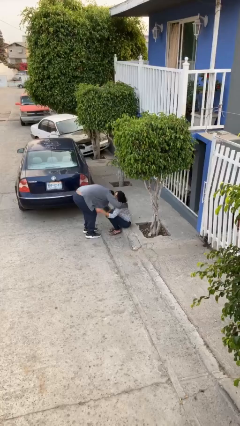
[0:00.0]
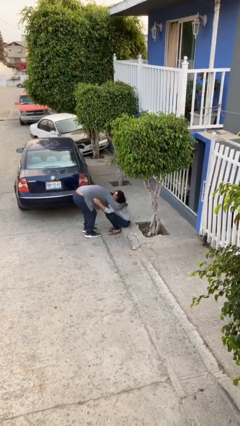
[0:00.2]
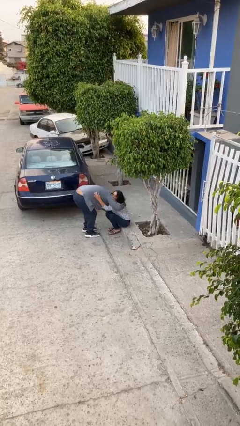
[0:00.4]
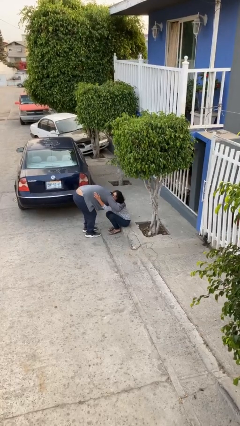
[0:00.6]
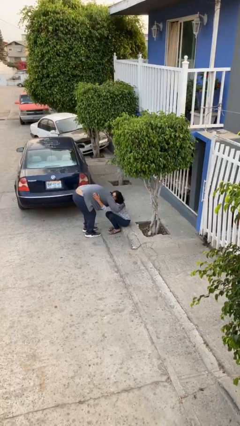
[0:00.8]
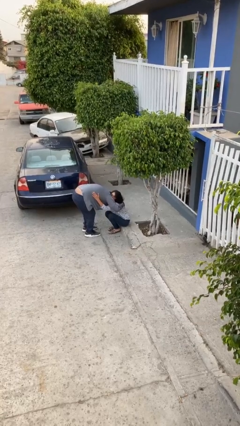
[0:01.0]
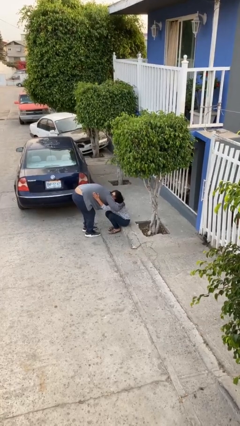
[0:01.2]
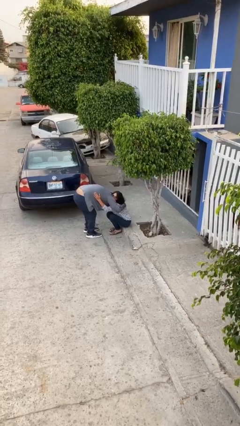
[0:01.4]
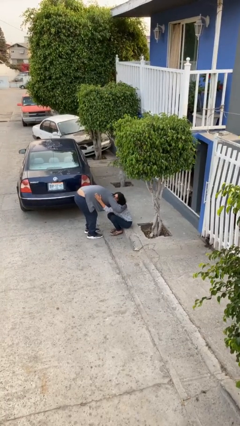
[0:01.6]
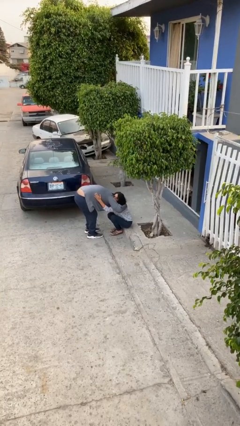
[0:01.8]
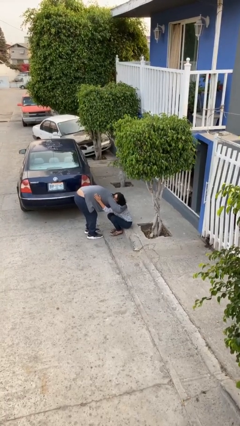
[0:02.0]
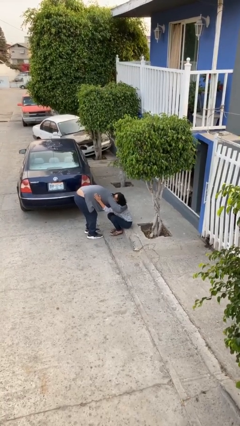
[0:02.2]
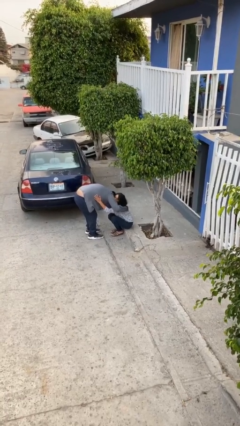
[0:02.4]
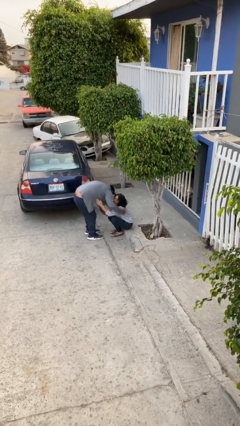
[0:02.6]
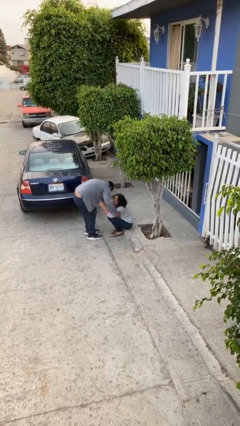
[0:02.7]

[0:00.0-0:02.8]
person embraces person

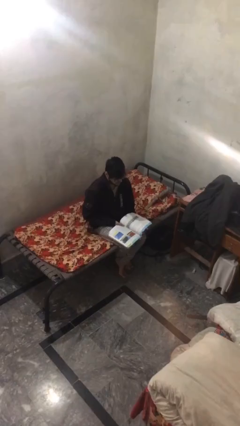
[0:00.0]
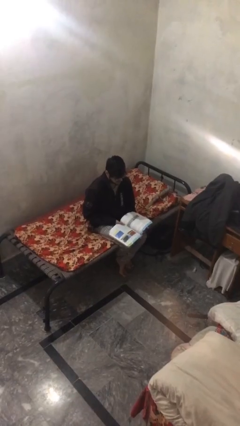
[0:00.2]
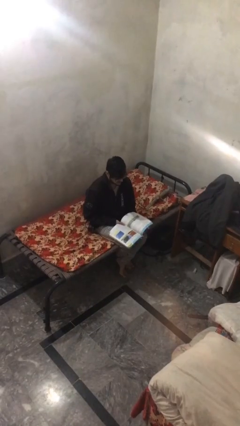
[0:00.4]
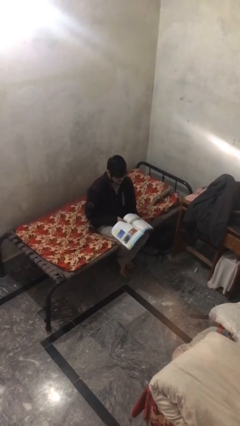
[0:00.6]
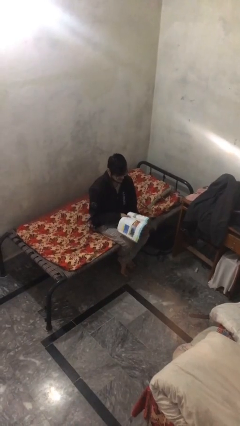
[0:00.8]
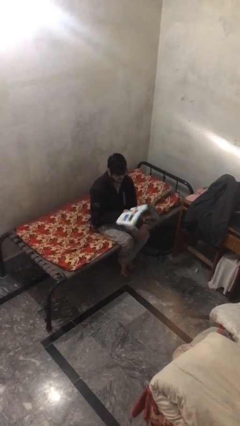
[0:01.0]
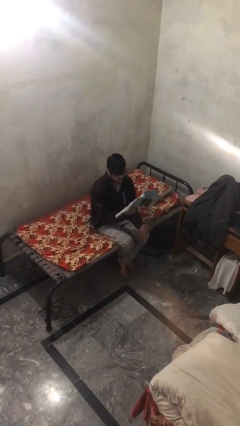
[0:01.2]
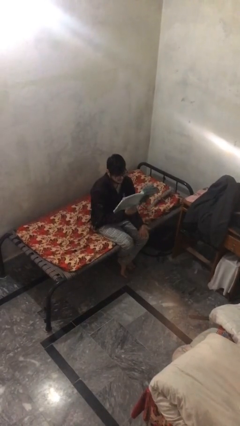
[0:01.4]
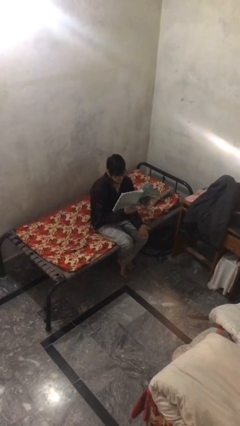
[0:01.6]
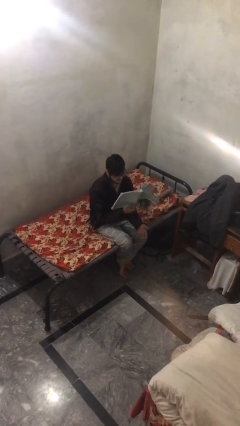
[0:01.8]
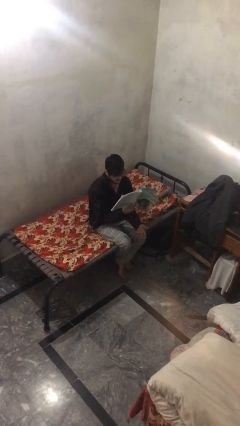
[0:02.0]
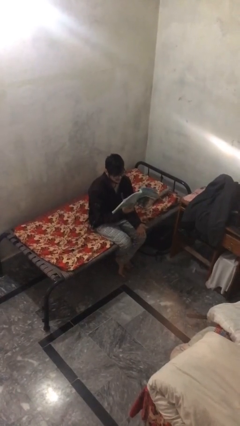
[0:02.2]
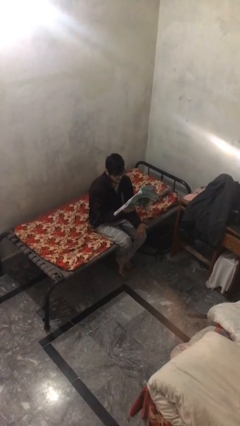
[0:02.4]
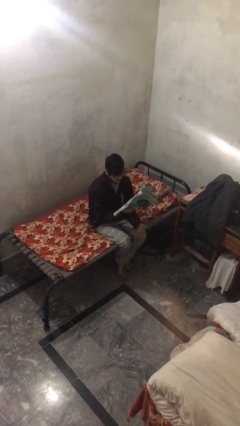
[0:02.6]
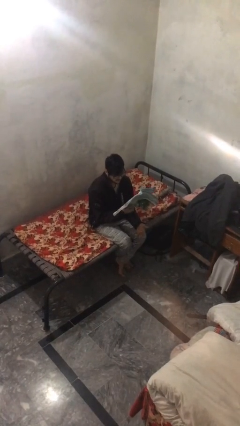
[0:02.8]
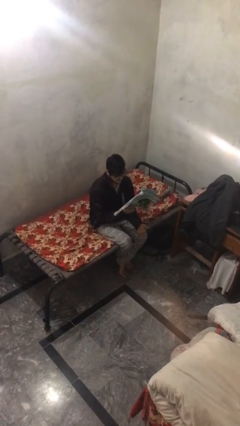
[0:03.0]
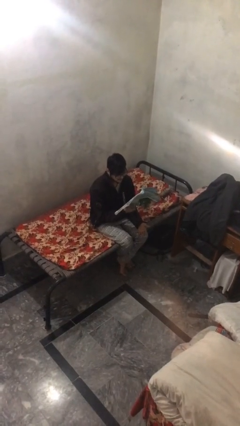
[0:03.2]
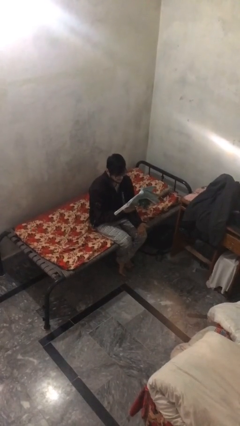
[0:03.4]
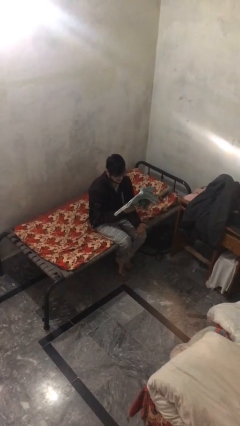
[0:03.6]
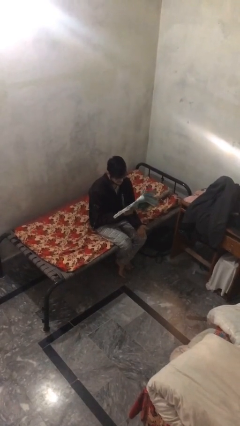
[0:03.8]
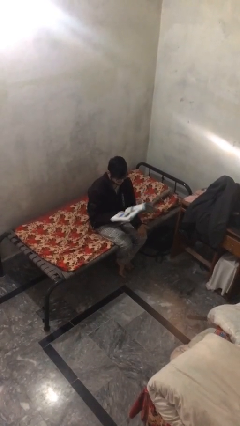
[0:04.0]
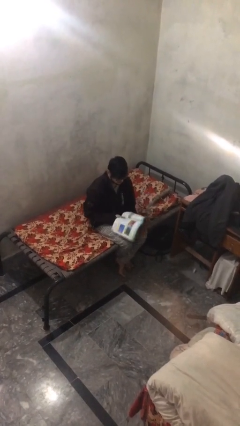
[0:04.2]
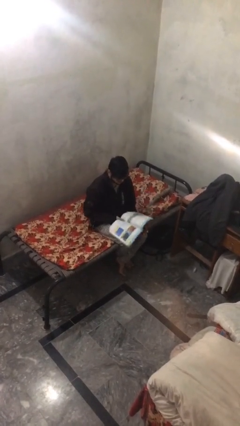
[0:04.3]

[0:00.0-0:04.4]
person reads document

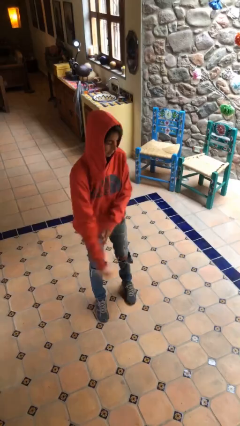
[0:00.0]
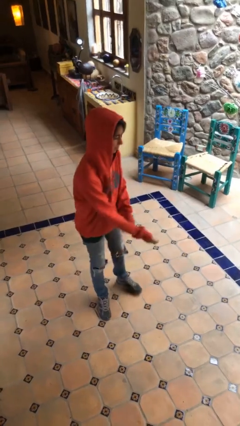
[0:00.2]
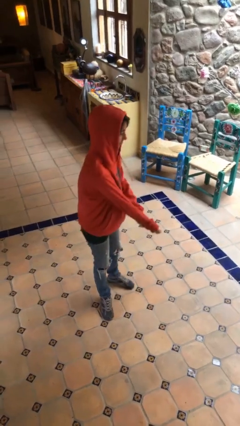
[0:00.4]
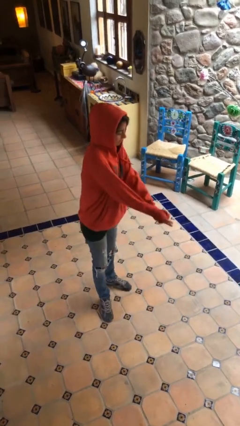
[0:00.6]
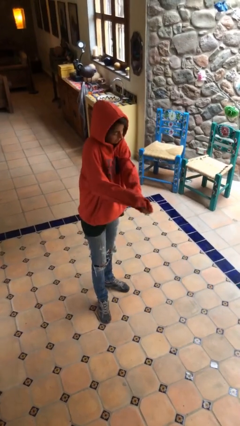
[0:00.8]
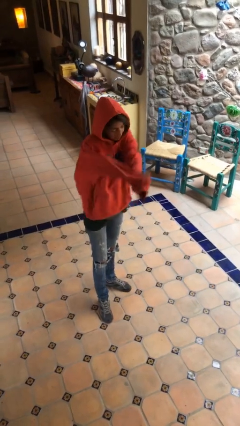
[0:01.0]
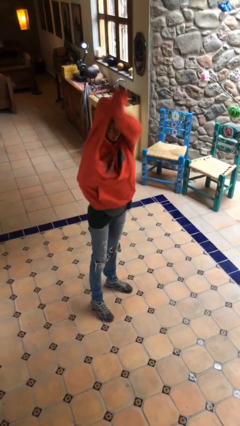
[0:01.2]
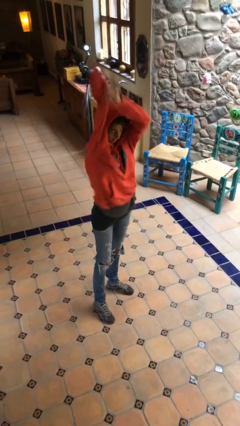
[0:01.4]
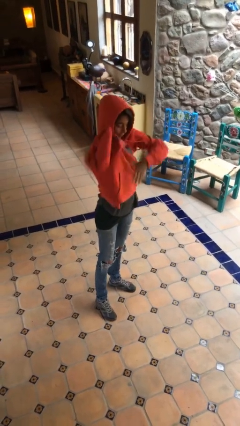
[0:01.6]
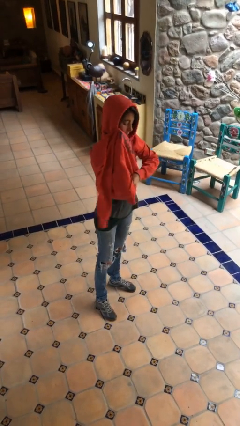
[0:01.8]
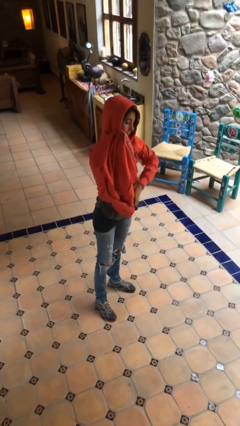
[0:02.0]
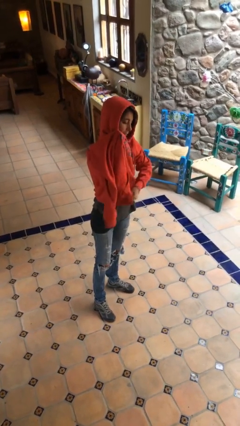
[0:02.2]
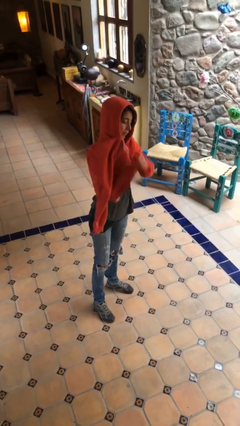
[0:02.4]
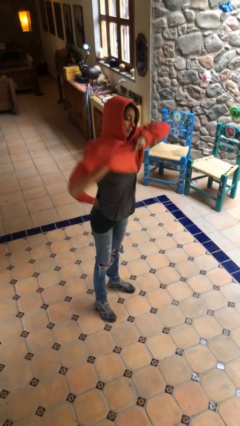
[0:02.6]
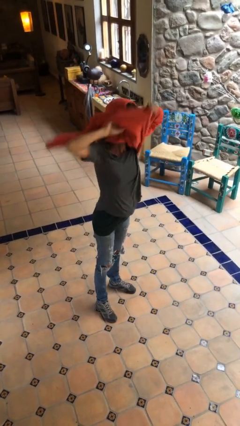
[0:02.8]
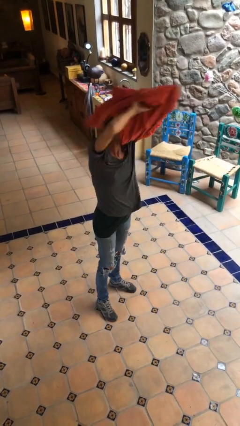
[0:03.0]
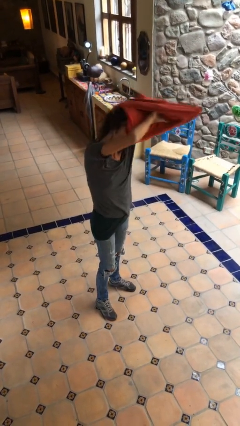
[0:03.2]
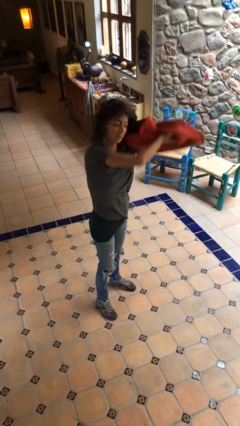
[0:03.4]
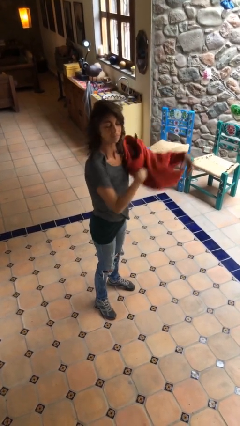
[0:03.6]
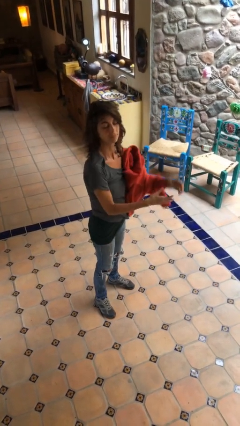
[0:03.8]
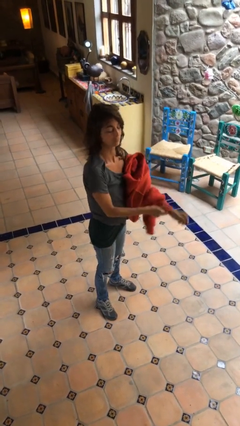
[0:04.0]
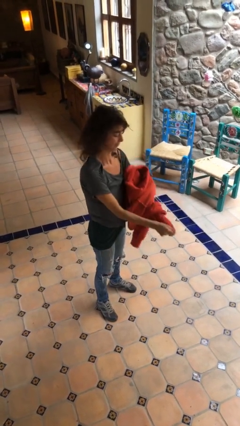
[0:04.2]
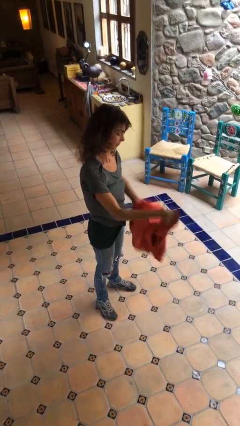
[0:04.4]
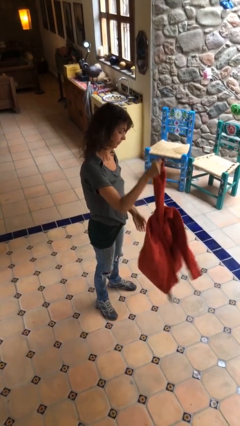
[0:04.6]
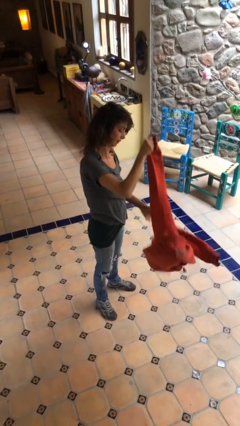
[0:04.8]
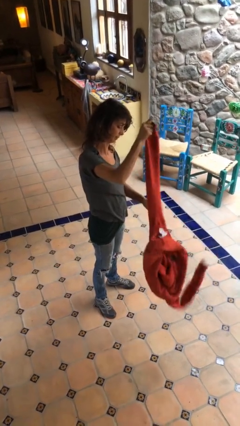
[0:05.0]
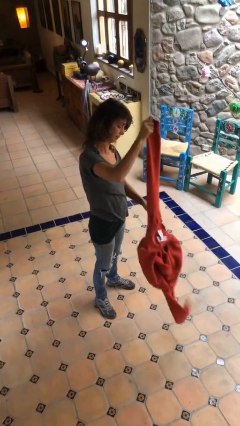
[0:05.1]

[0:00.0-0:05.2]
person takes off hoodie

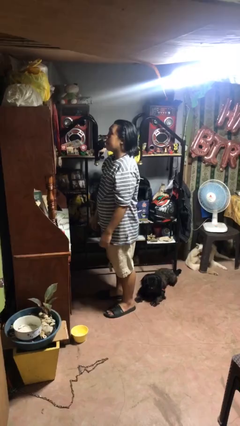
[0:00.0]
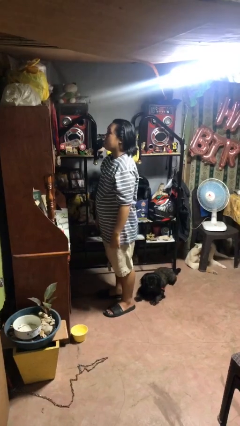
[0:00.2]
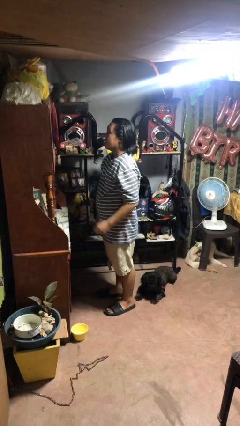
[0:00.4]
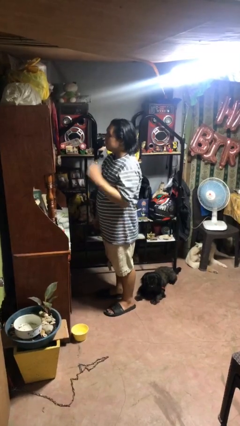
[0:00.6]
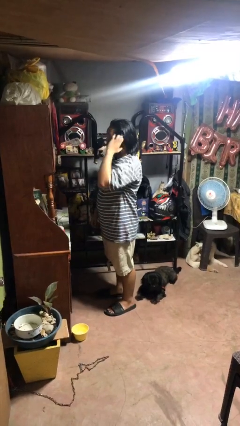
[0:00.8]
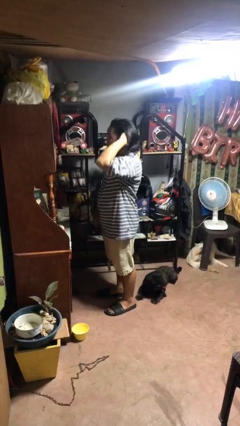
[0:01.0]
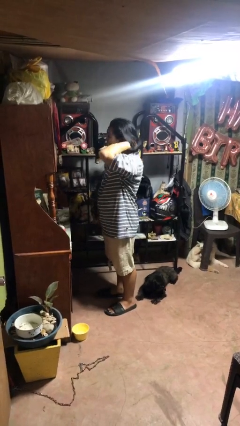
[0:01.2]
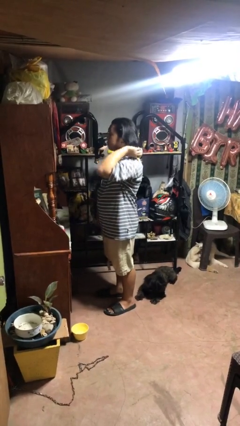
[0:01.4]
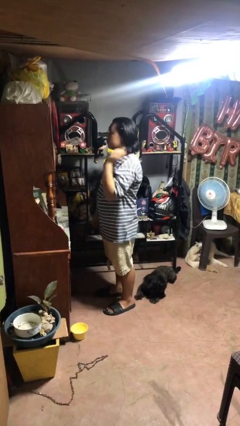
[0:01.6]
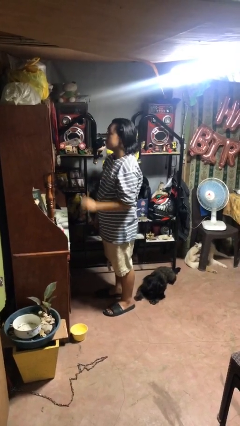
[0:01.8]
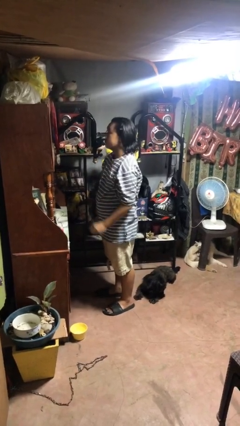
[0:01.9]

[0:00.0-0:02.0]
person strokes hair

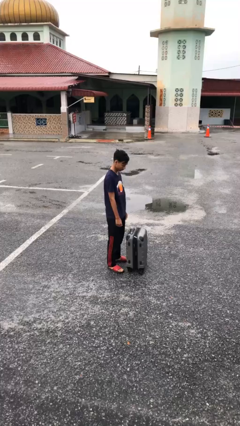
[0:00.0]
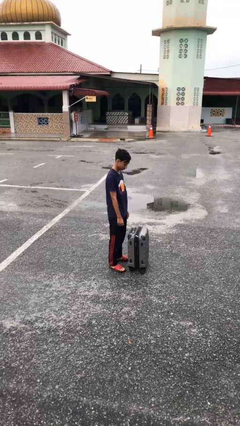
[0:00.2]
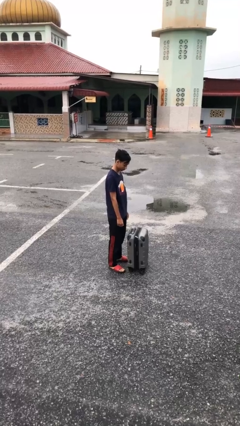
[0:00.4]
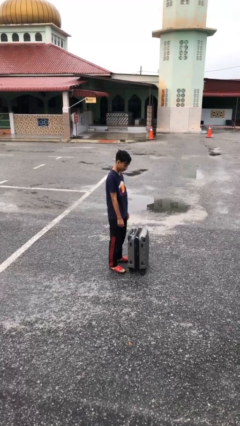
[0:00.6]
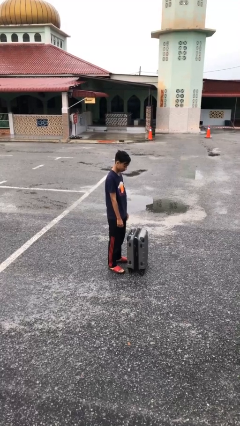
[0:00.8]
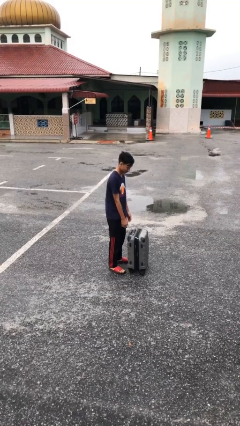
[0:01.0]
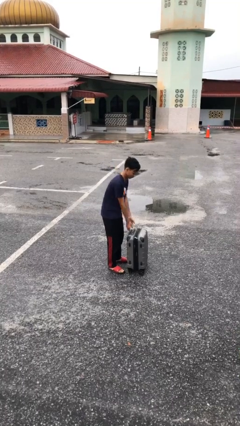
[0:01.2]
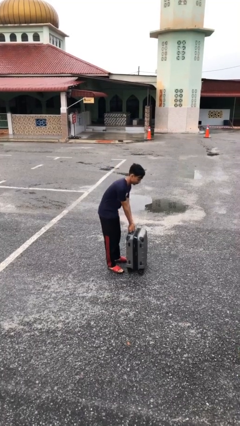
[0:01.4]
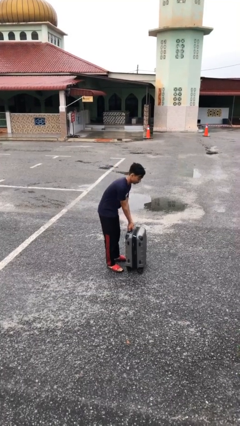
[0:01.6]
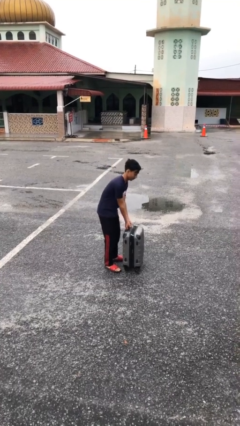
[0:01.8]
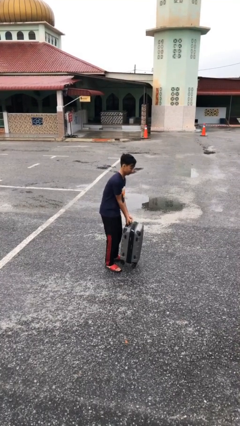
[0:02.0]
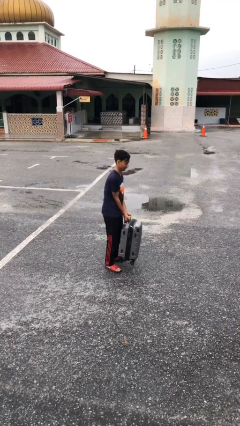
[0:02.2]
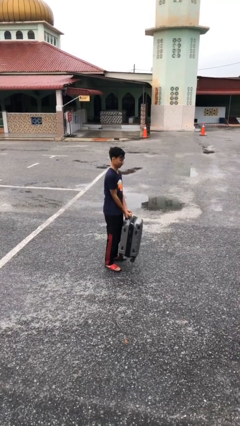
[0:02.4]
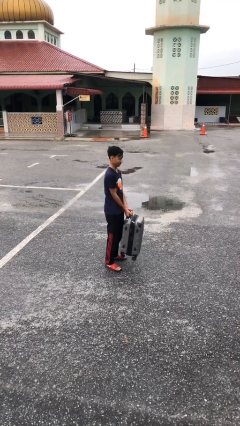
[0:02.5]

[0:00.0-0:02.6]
person picks up object from floor

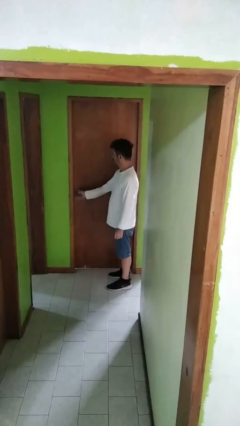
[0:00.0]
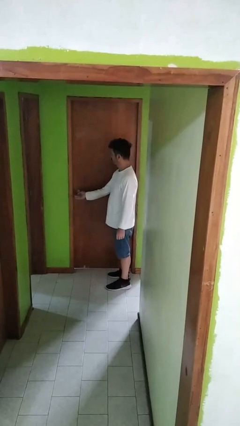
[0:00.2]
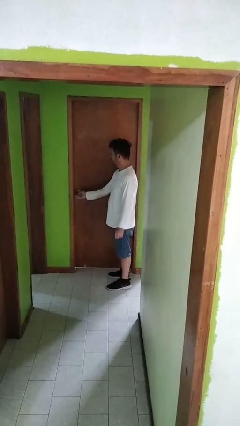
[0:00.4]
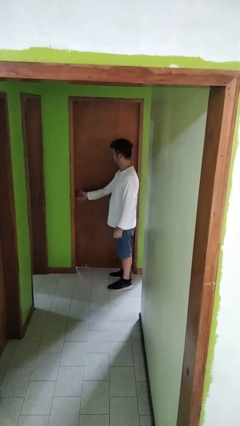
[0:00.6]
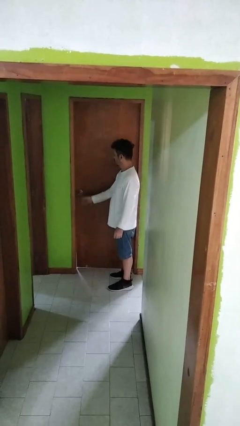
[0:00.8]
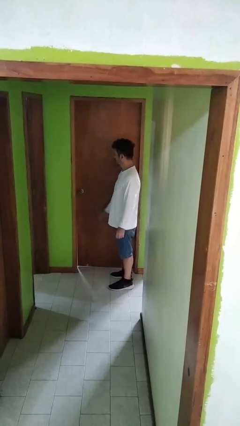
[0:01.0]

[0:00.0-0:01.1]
person unlocks door with keys
